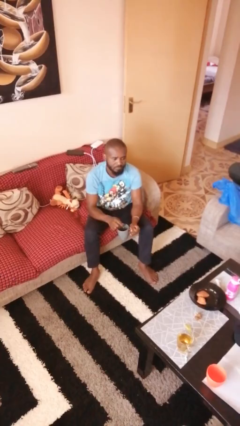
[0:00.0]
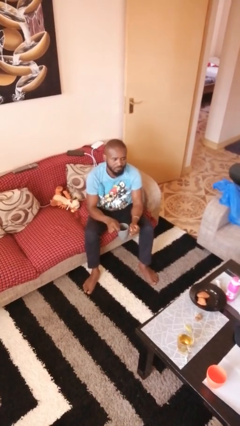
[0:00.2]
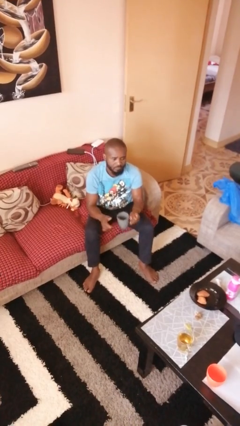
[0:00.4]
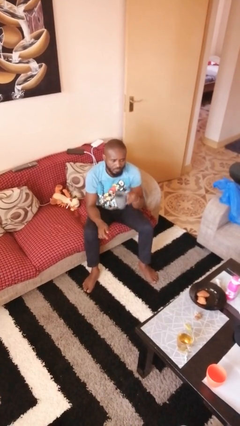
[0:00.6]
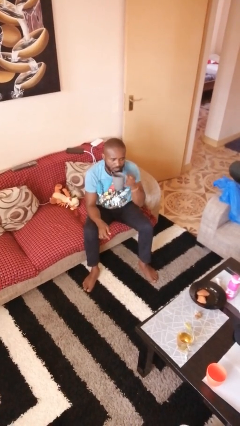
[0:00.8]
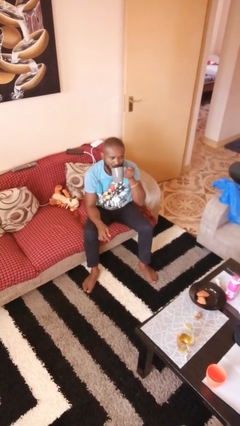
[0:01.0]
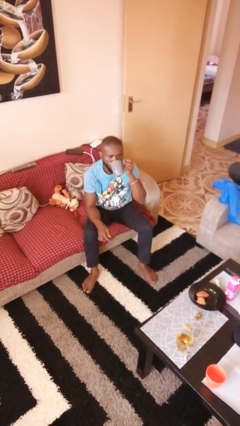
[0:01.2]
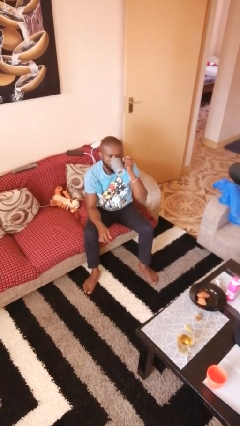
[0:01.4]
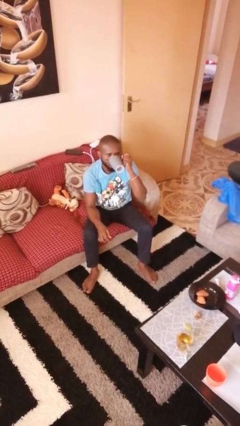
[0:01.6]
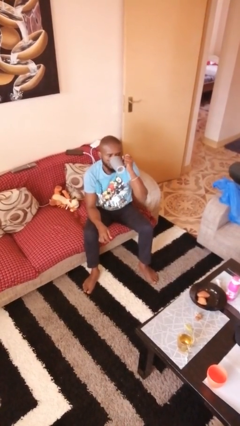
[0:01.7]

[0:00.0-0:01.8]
person drinks from mug

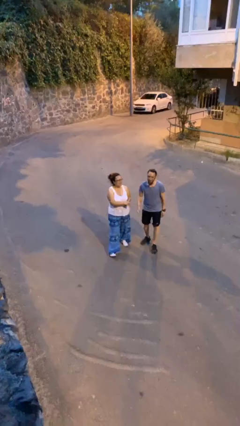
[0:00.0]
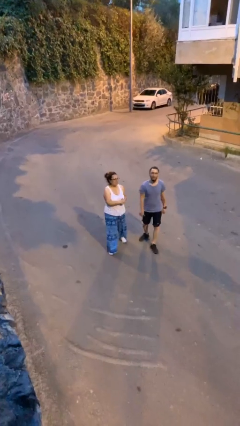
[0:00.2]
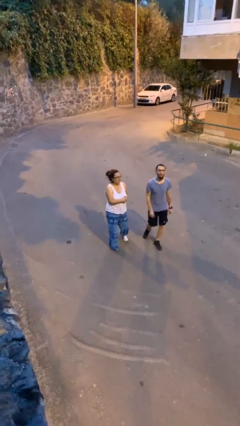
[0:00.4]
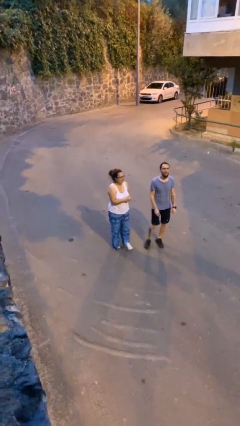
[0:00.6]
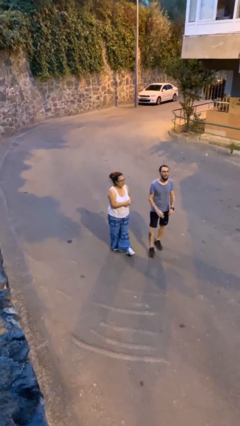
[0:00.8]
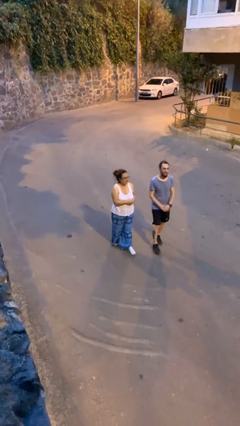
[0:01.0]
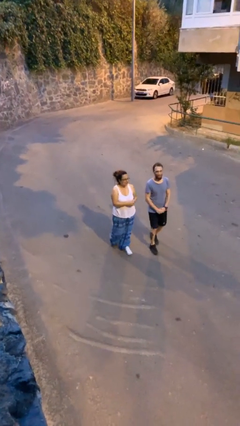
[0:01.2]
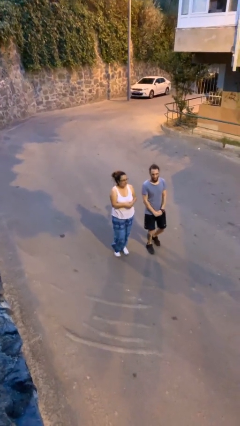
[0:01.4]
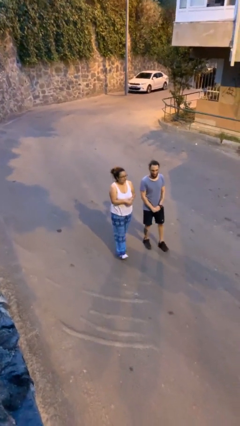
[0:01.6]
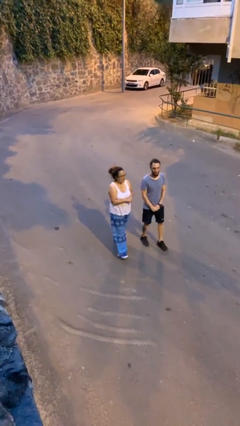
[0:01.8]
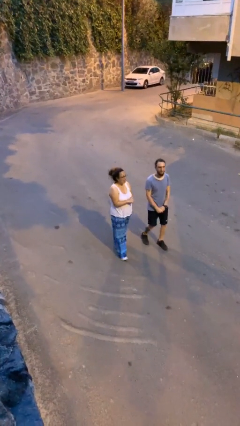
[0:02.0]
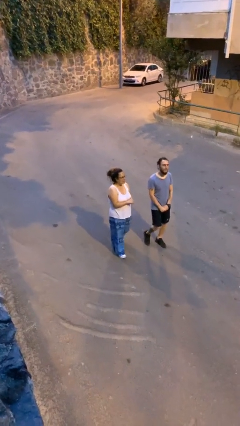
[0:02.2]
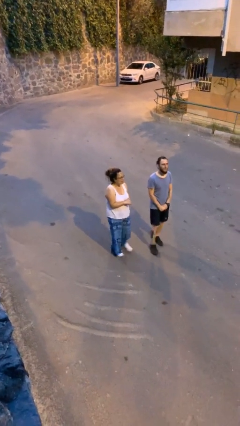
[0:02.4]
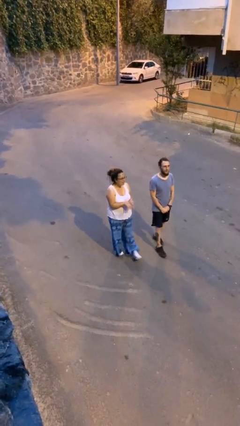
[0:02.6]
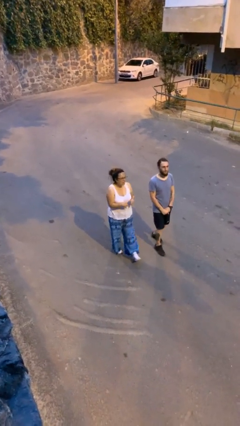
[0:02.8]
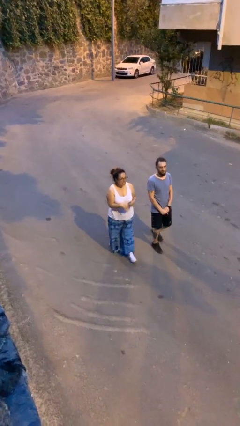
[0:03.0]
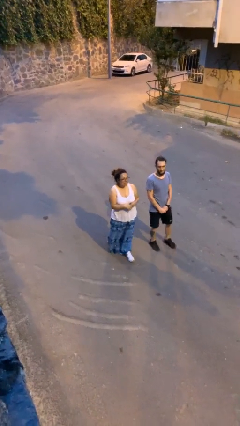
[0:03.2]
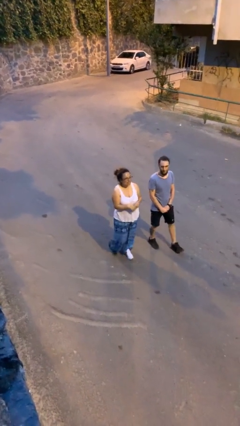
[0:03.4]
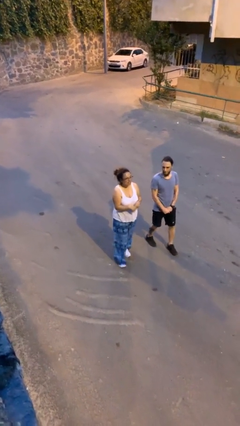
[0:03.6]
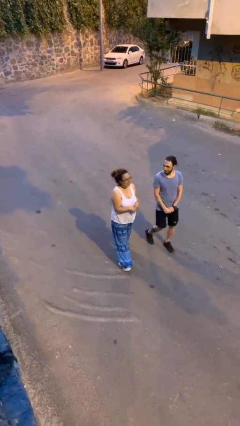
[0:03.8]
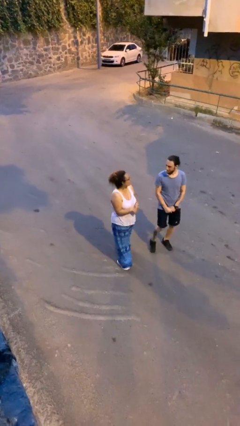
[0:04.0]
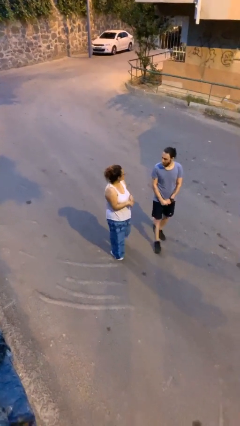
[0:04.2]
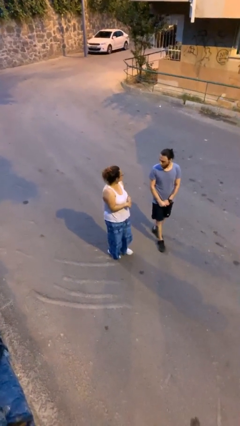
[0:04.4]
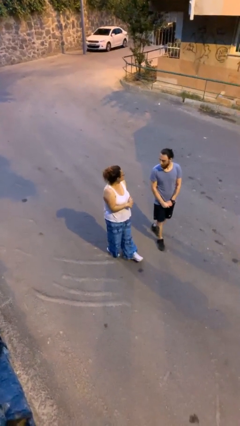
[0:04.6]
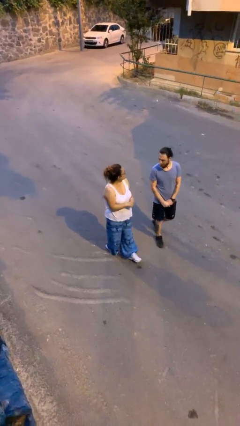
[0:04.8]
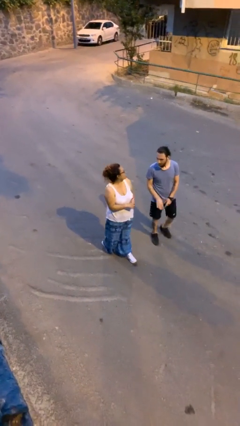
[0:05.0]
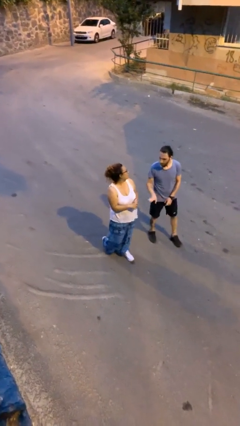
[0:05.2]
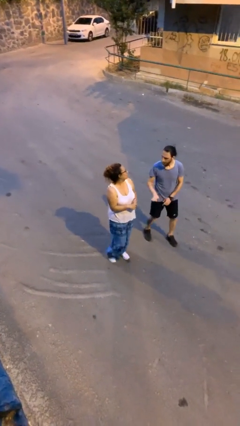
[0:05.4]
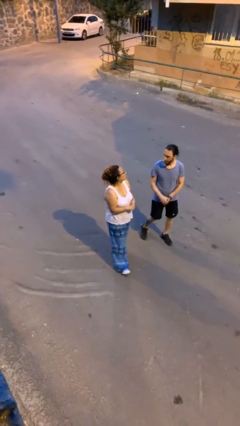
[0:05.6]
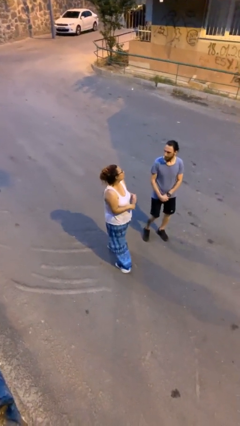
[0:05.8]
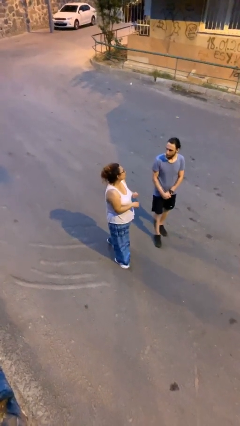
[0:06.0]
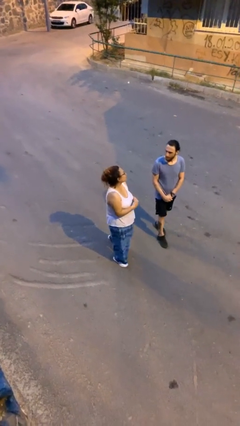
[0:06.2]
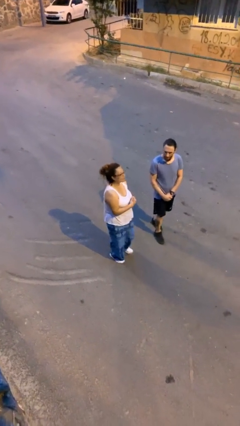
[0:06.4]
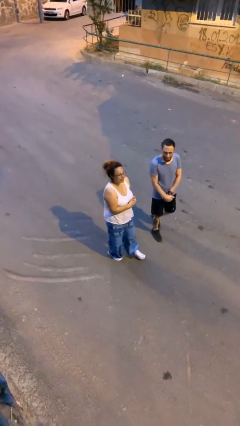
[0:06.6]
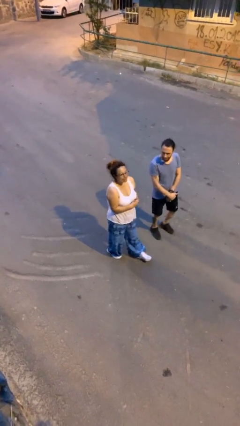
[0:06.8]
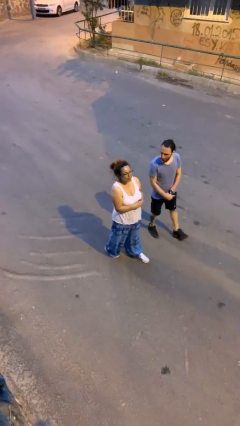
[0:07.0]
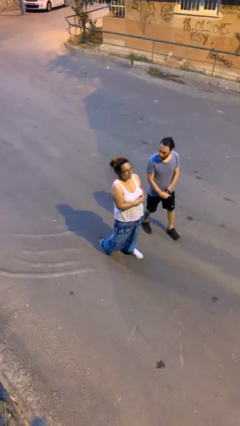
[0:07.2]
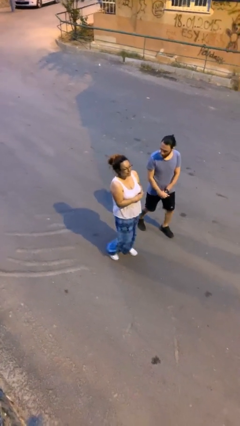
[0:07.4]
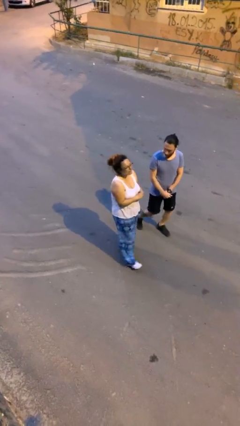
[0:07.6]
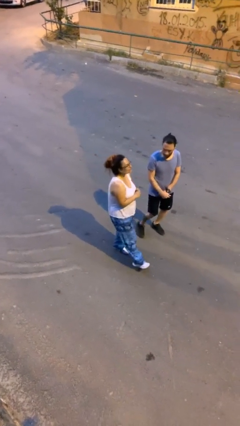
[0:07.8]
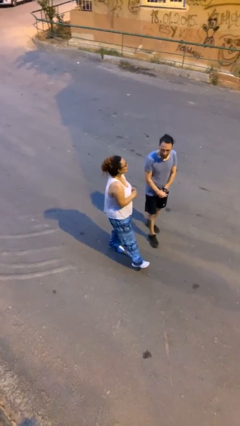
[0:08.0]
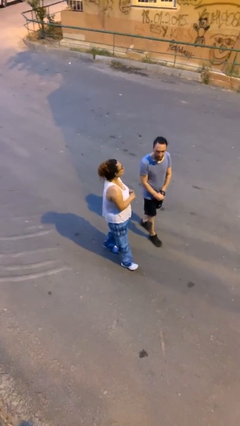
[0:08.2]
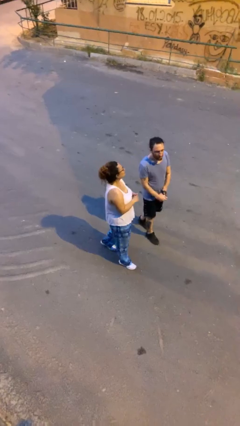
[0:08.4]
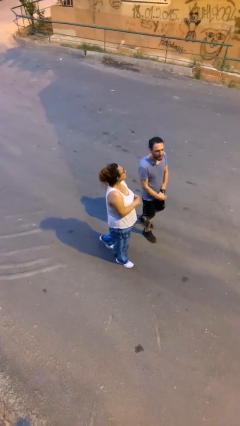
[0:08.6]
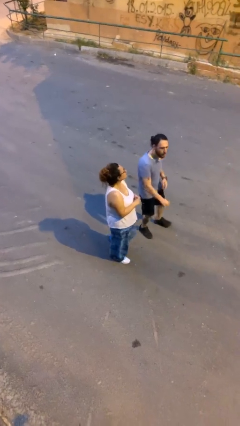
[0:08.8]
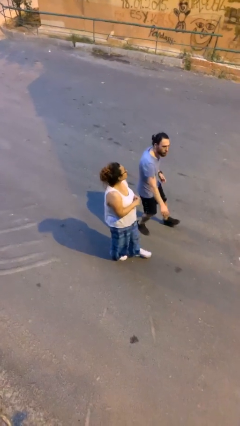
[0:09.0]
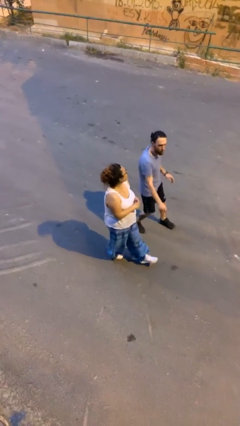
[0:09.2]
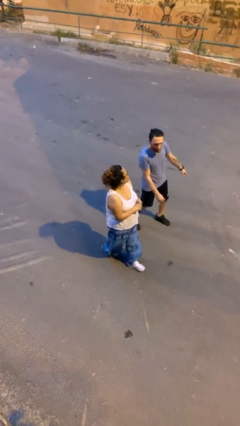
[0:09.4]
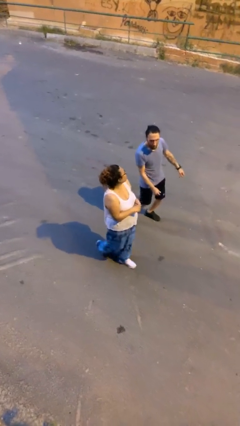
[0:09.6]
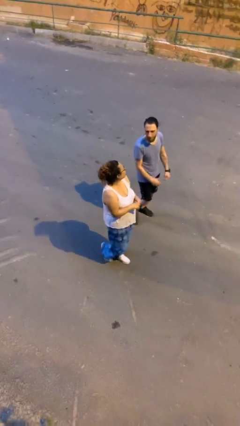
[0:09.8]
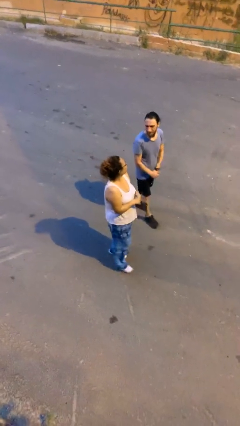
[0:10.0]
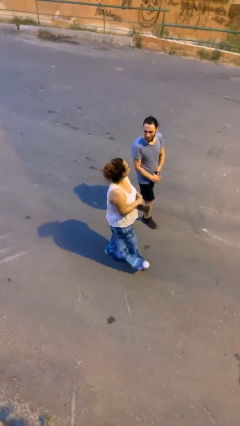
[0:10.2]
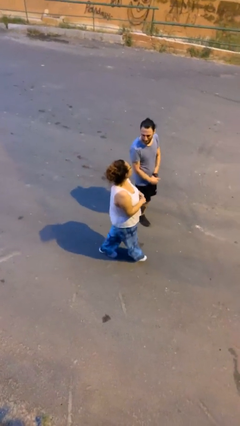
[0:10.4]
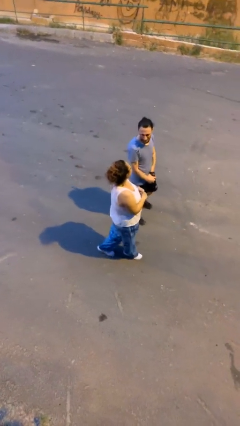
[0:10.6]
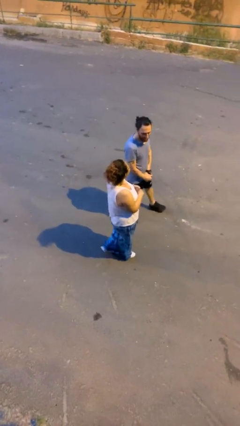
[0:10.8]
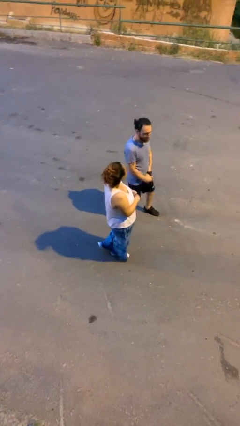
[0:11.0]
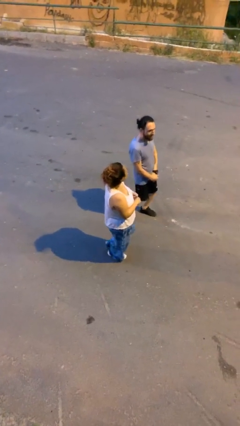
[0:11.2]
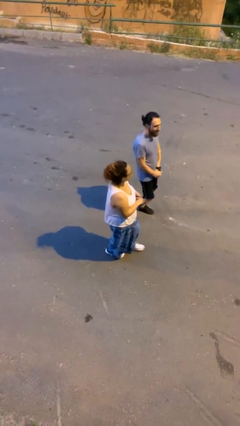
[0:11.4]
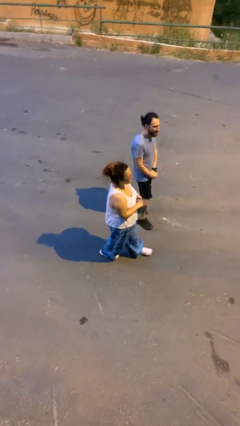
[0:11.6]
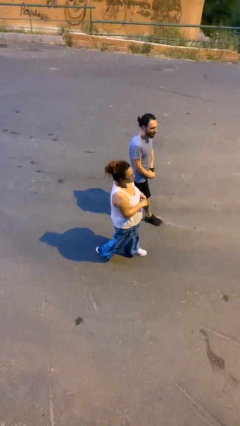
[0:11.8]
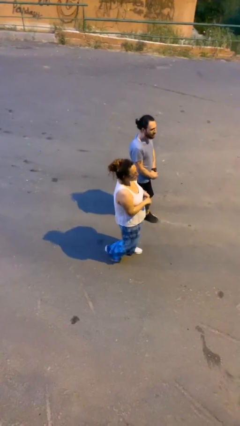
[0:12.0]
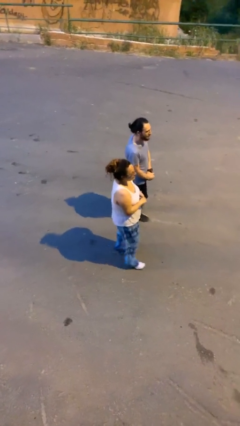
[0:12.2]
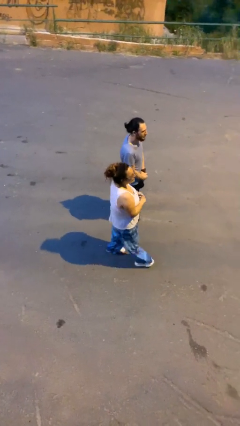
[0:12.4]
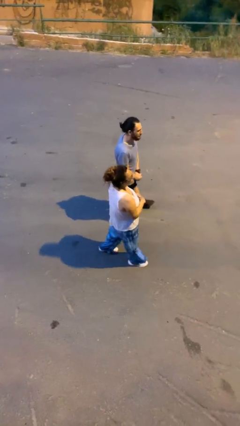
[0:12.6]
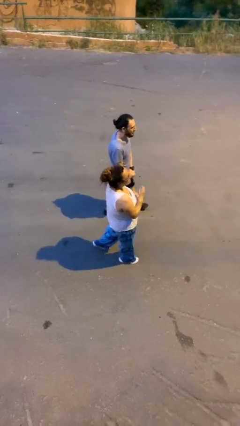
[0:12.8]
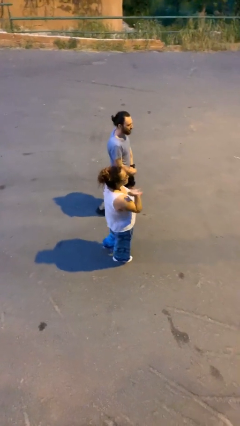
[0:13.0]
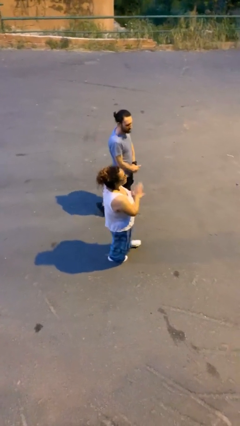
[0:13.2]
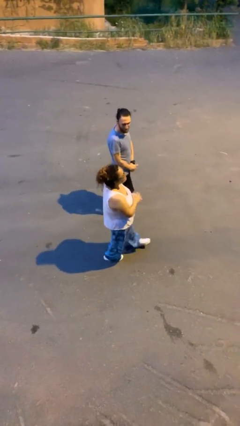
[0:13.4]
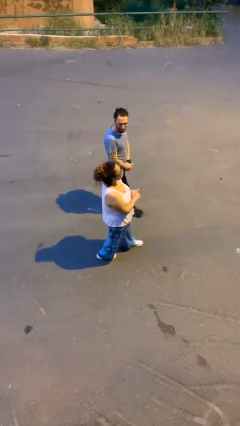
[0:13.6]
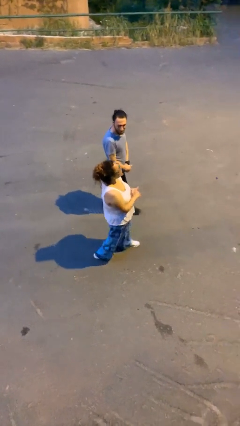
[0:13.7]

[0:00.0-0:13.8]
person talks to person

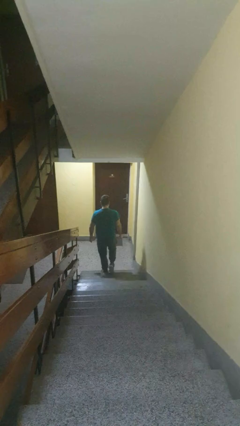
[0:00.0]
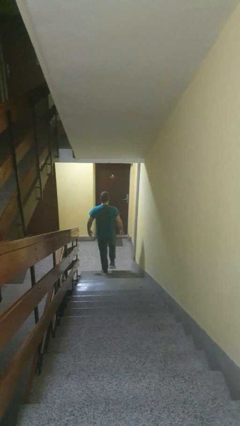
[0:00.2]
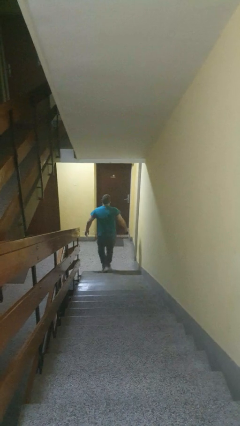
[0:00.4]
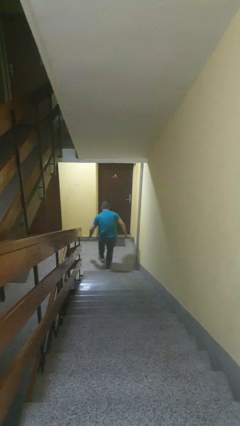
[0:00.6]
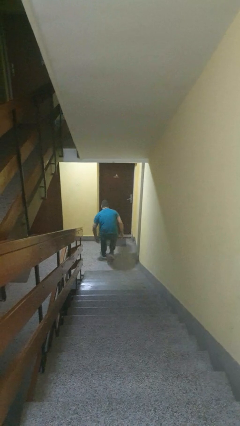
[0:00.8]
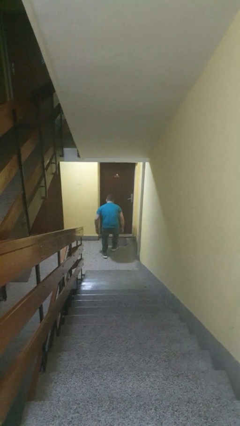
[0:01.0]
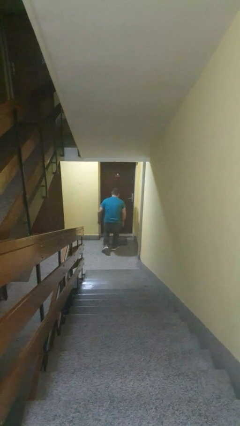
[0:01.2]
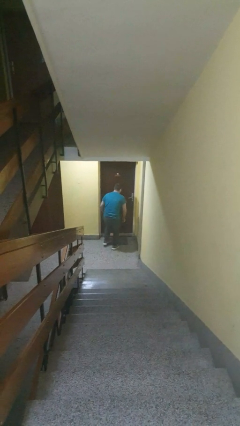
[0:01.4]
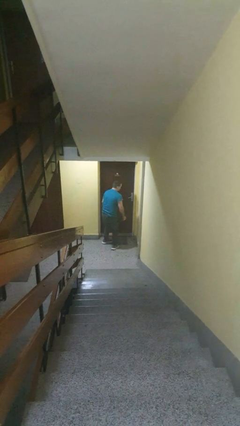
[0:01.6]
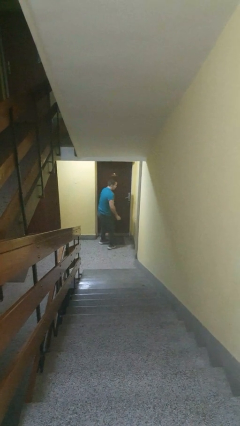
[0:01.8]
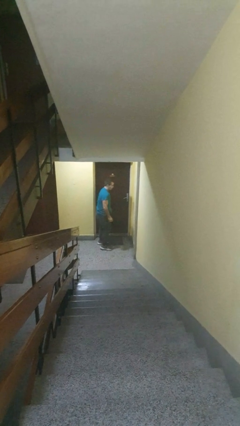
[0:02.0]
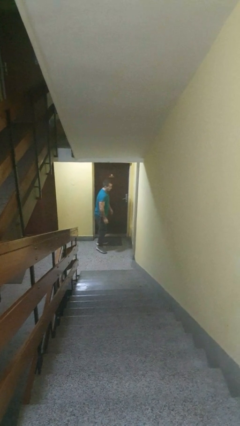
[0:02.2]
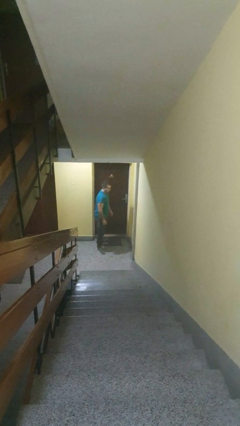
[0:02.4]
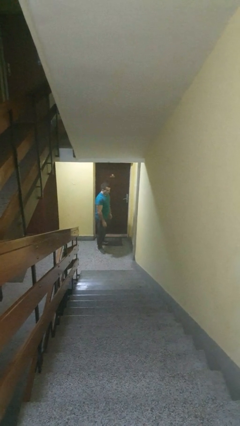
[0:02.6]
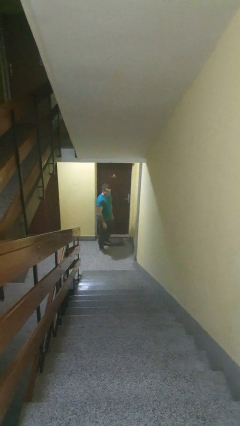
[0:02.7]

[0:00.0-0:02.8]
person trips on stair
